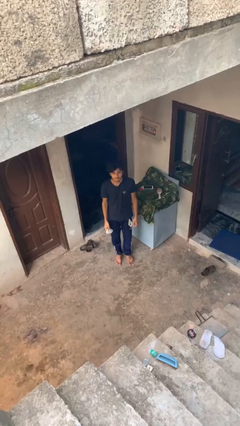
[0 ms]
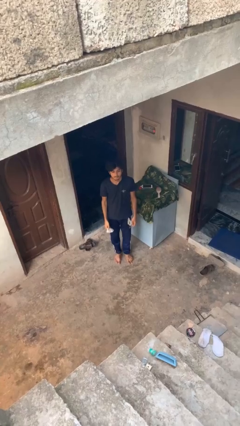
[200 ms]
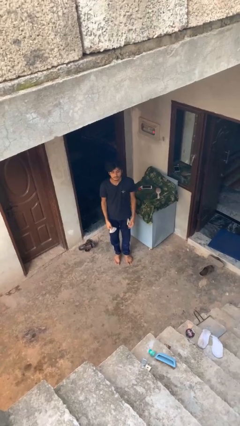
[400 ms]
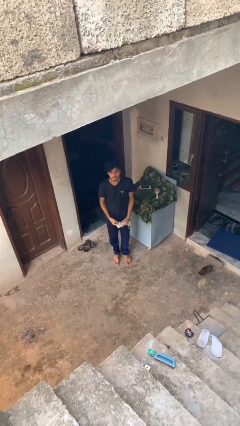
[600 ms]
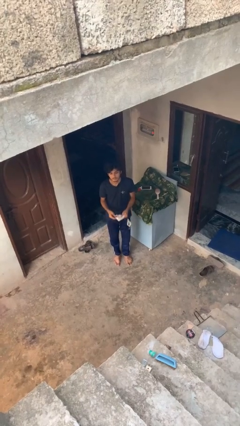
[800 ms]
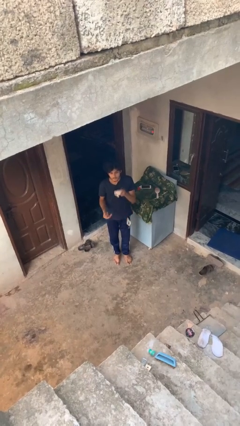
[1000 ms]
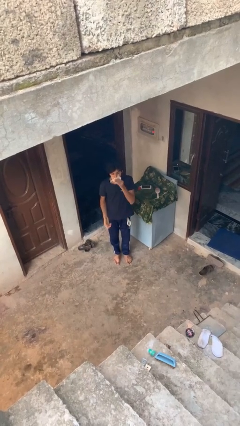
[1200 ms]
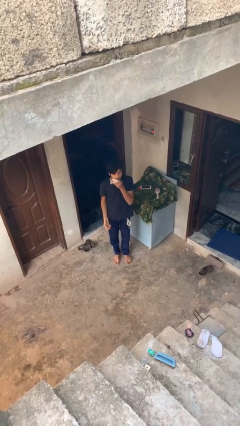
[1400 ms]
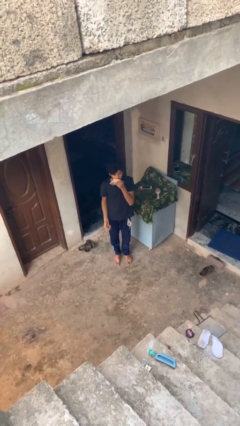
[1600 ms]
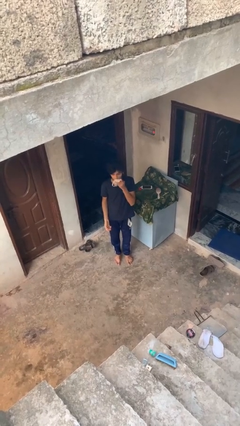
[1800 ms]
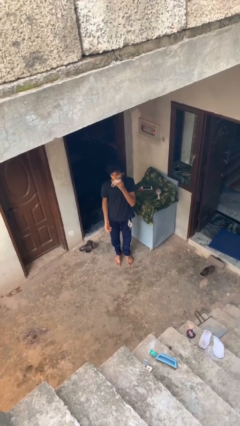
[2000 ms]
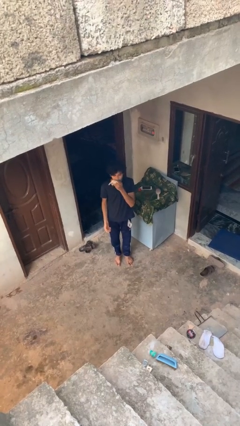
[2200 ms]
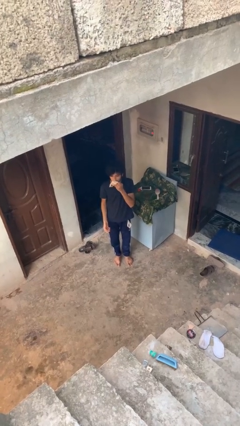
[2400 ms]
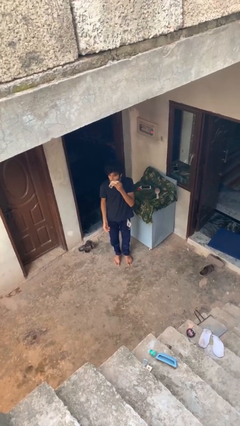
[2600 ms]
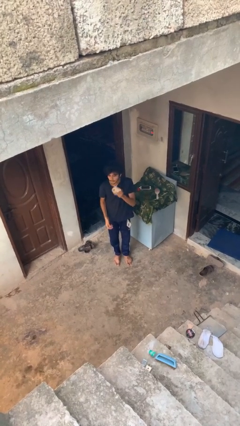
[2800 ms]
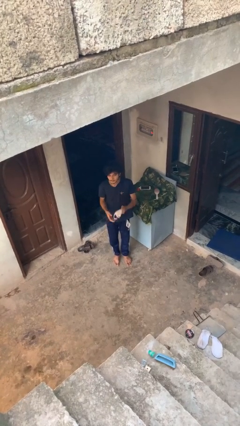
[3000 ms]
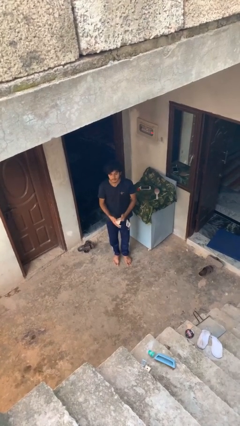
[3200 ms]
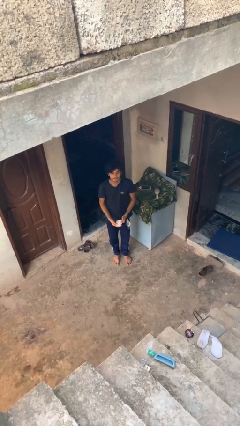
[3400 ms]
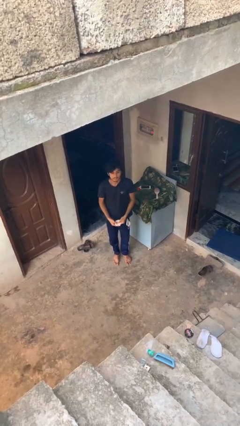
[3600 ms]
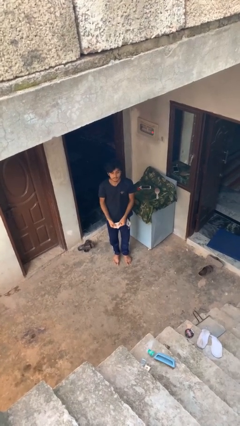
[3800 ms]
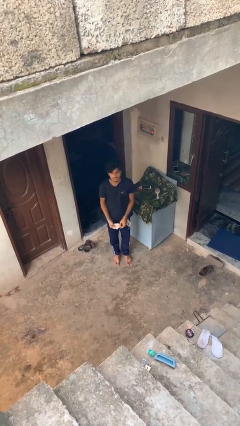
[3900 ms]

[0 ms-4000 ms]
person wipes mouth with napkin

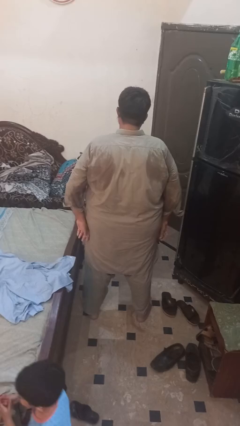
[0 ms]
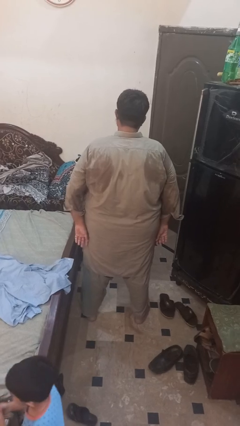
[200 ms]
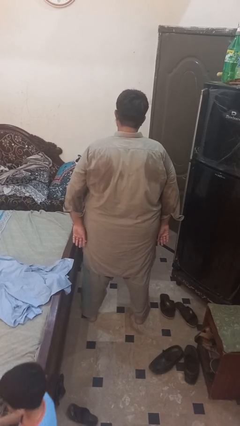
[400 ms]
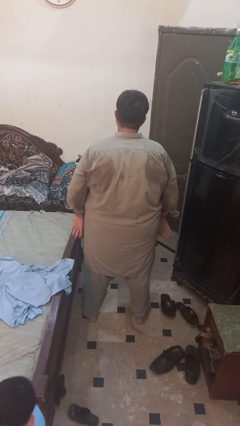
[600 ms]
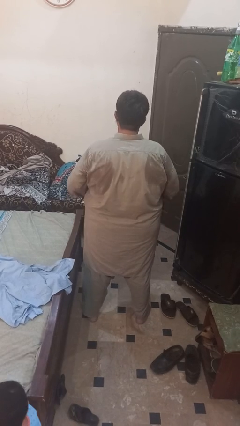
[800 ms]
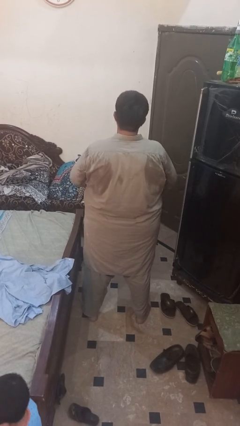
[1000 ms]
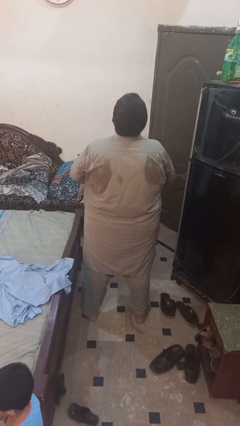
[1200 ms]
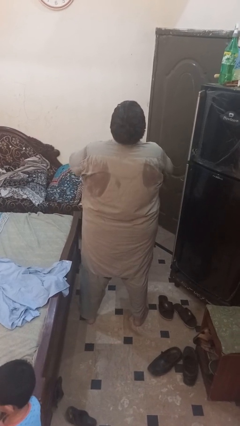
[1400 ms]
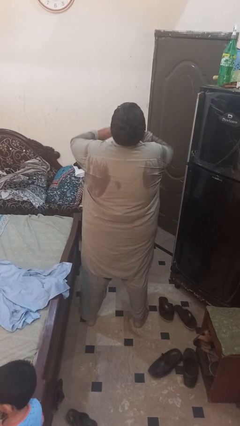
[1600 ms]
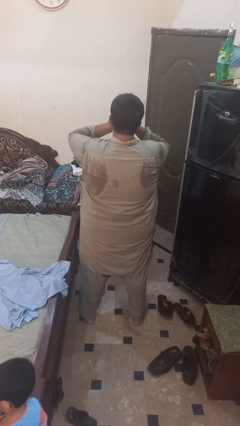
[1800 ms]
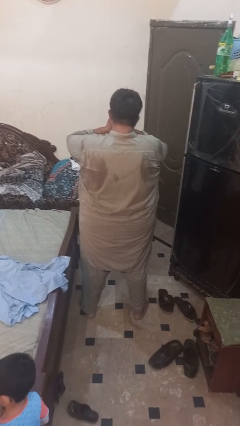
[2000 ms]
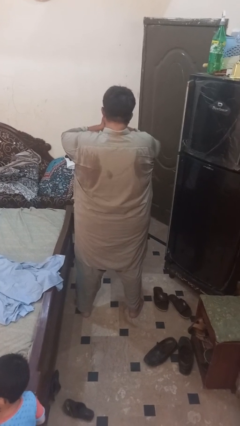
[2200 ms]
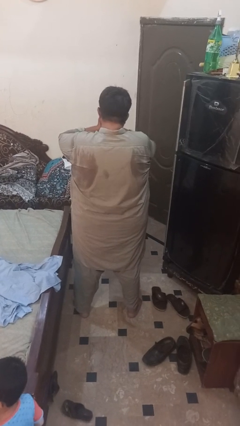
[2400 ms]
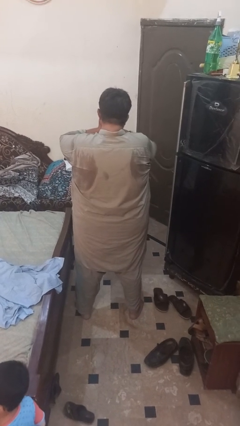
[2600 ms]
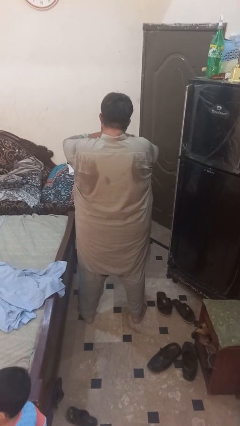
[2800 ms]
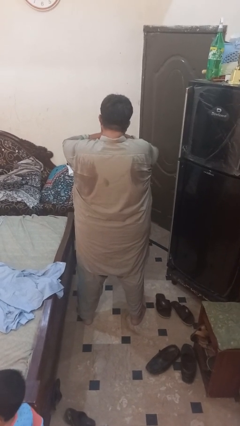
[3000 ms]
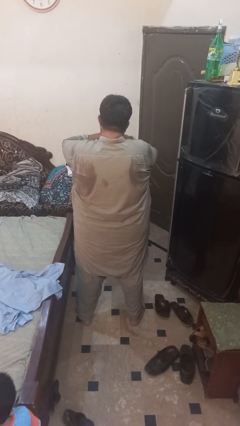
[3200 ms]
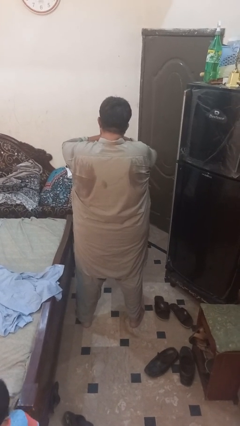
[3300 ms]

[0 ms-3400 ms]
person sneezes into hand

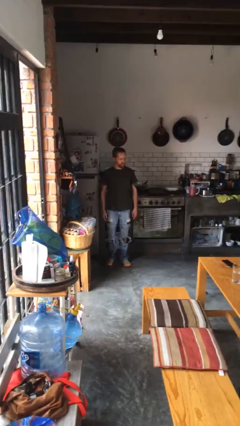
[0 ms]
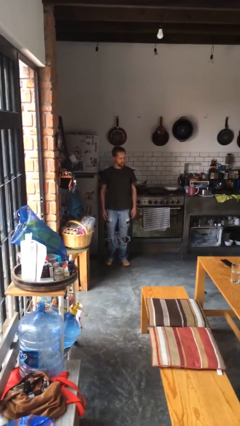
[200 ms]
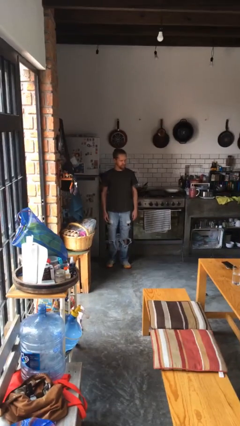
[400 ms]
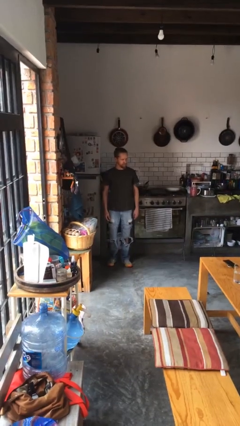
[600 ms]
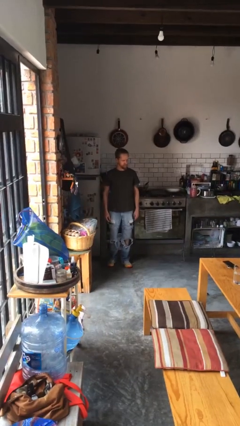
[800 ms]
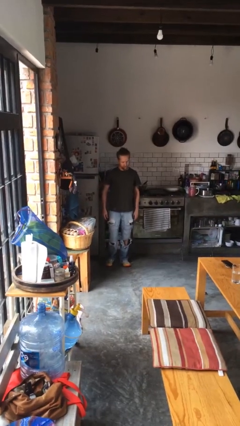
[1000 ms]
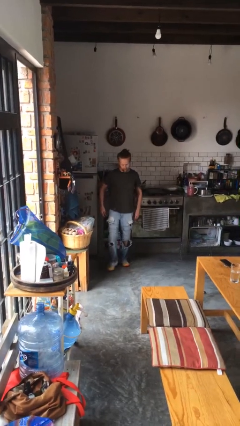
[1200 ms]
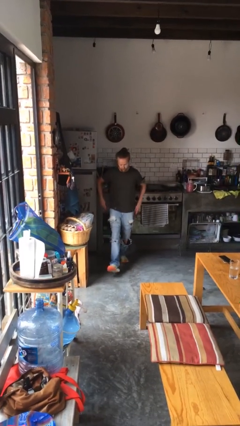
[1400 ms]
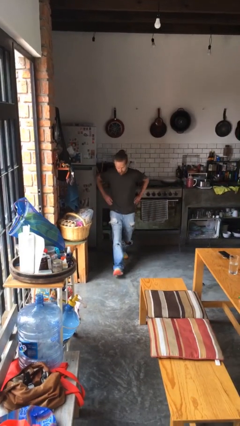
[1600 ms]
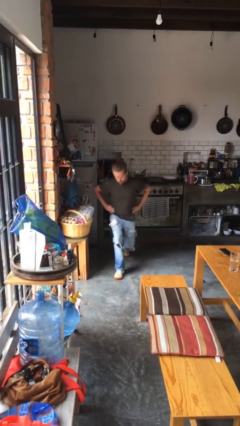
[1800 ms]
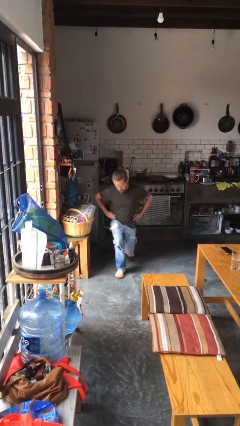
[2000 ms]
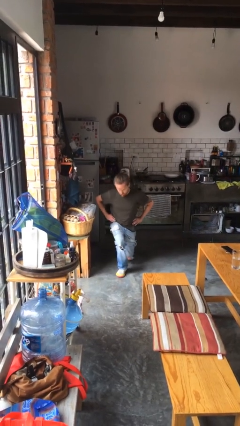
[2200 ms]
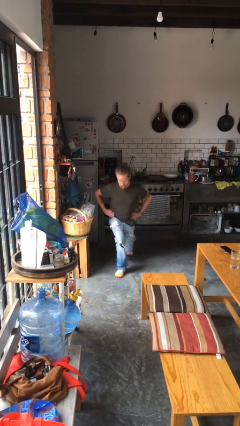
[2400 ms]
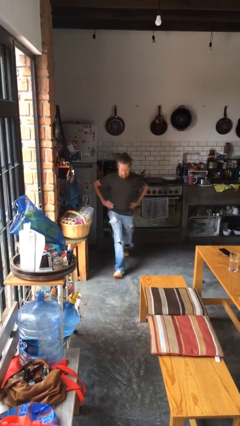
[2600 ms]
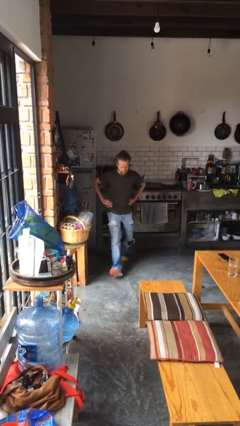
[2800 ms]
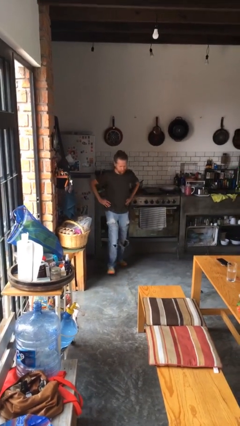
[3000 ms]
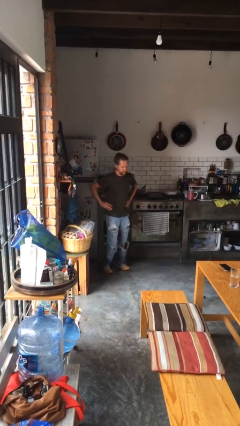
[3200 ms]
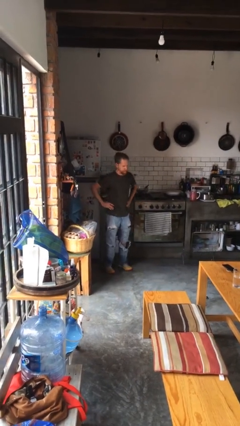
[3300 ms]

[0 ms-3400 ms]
person exercises with lunges

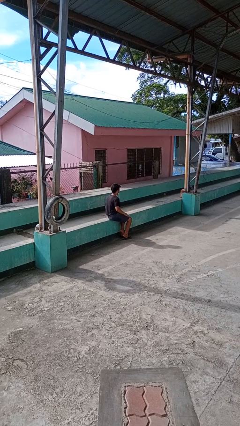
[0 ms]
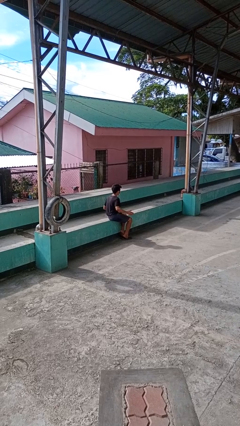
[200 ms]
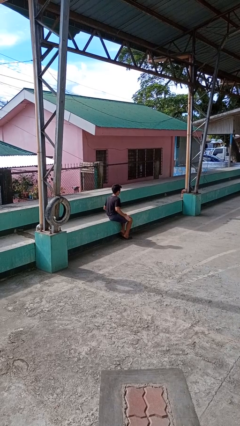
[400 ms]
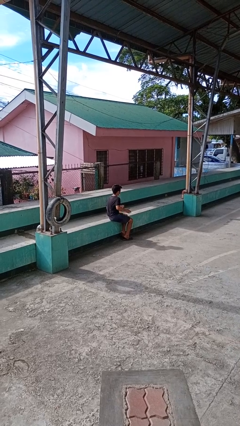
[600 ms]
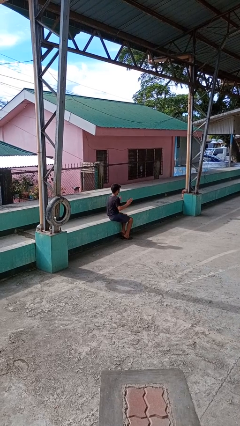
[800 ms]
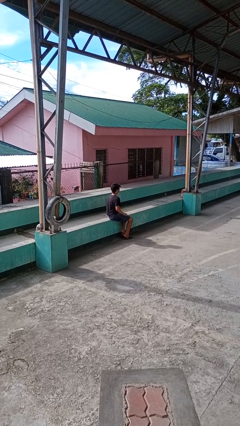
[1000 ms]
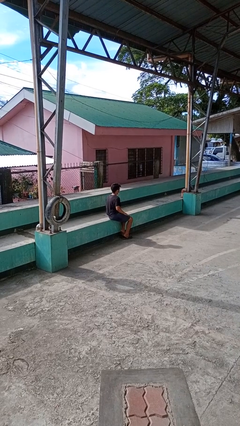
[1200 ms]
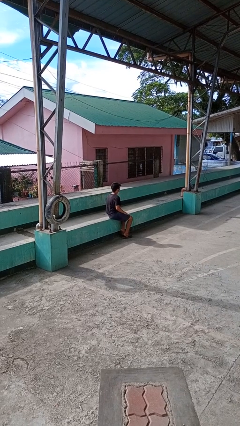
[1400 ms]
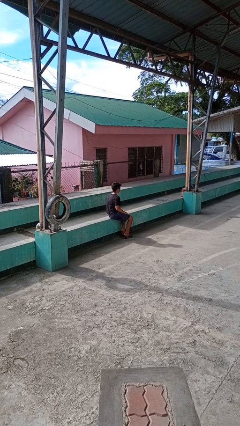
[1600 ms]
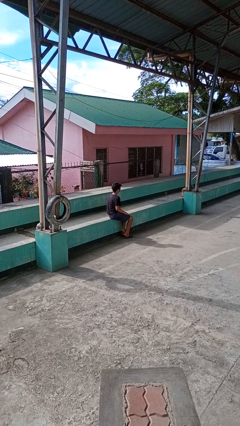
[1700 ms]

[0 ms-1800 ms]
person slaps hands on thighs

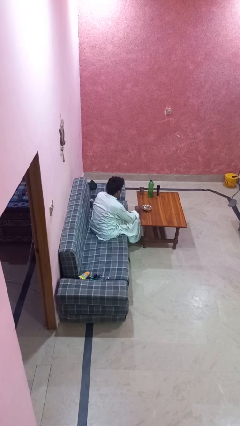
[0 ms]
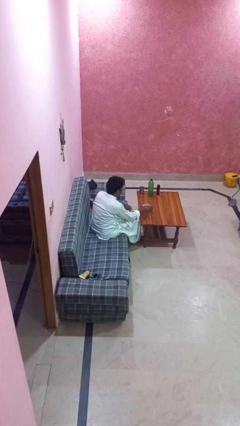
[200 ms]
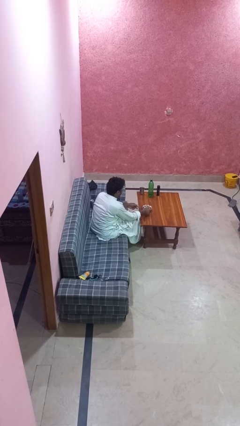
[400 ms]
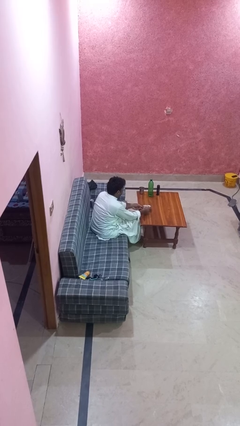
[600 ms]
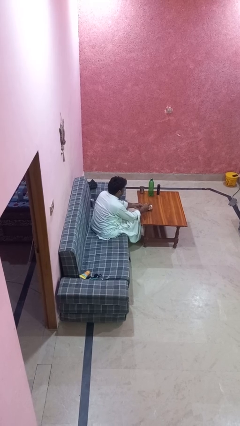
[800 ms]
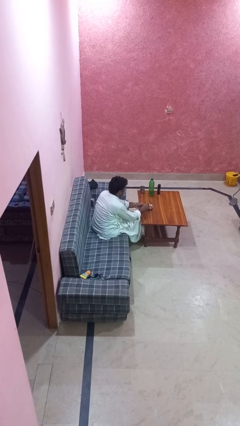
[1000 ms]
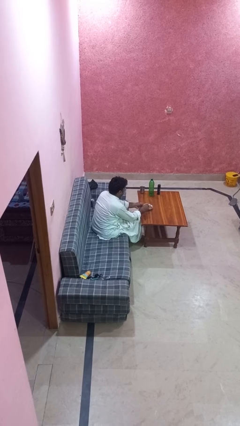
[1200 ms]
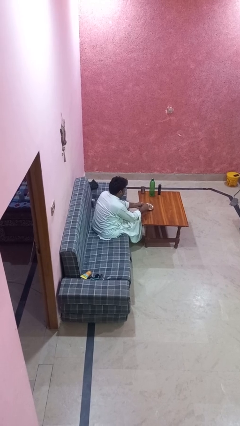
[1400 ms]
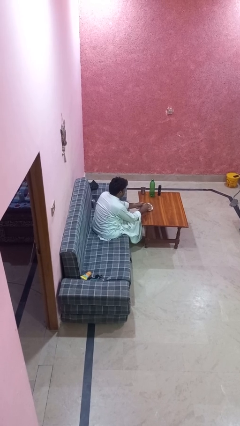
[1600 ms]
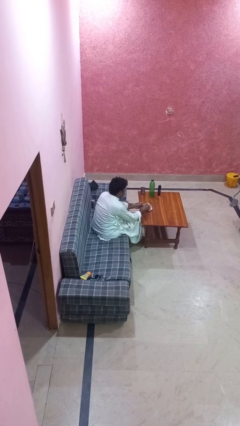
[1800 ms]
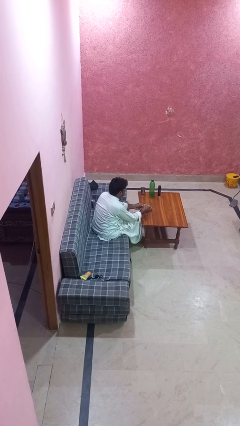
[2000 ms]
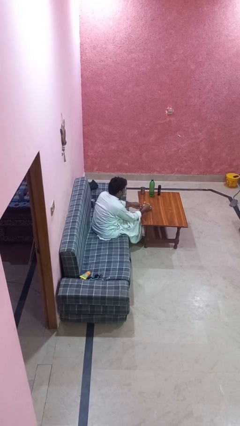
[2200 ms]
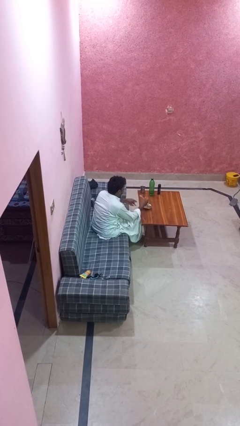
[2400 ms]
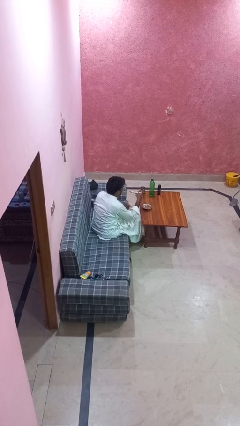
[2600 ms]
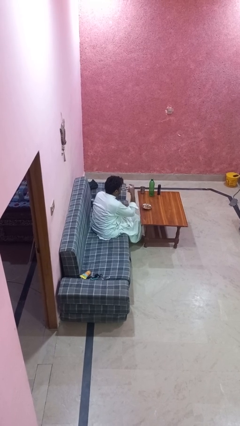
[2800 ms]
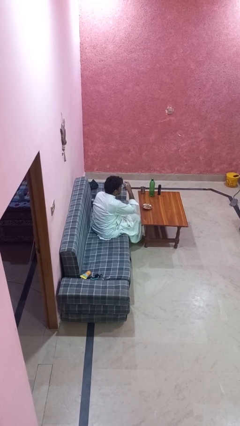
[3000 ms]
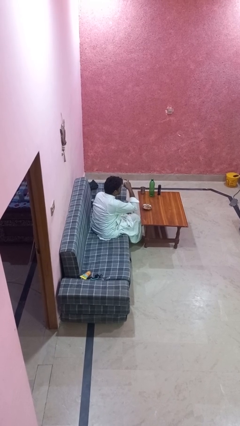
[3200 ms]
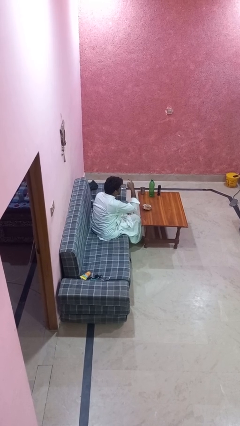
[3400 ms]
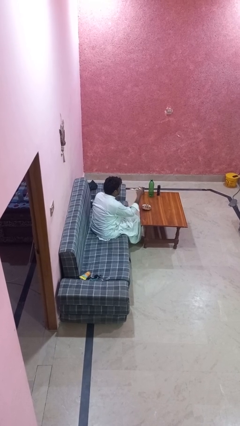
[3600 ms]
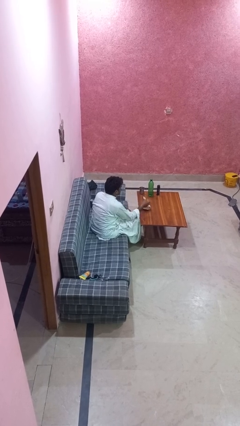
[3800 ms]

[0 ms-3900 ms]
person eats with utensil

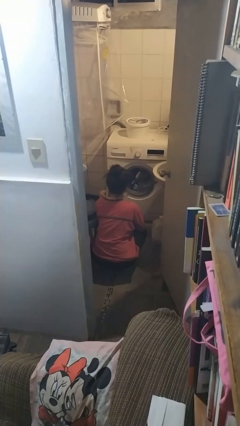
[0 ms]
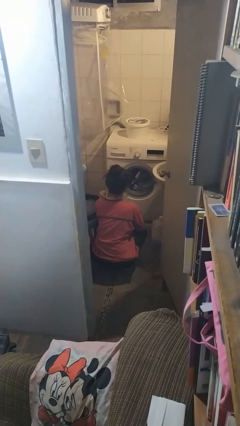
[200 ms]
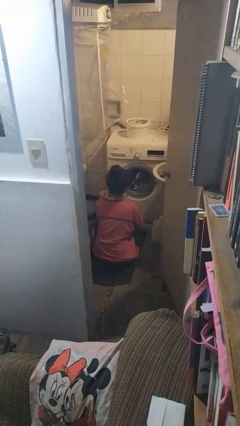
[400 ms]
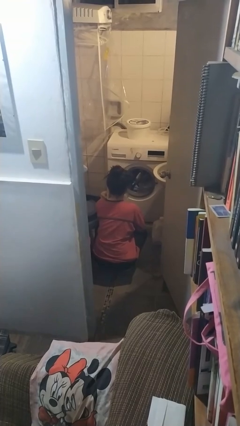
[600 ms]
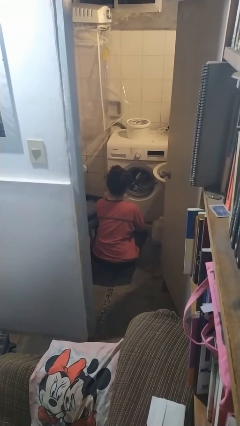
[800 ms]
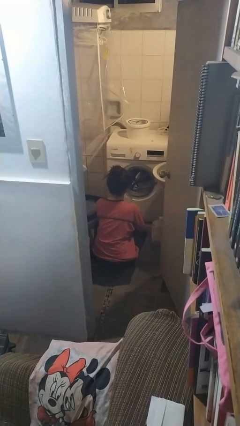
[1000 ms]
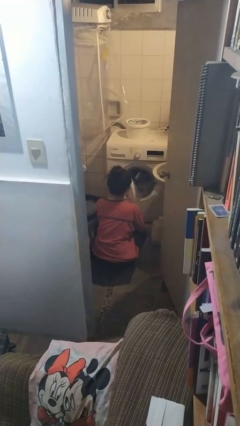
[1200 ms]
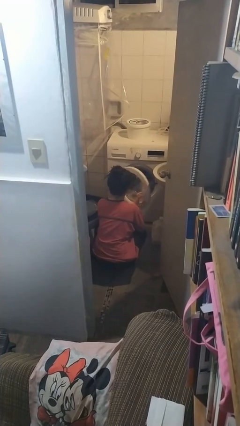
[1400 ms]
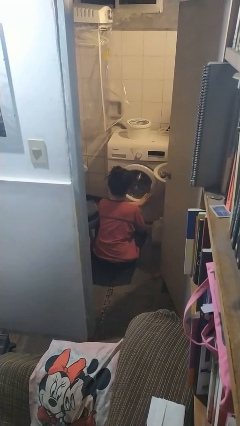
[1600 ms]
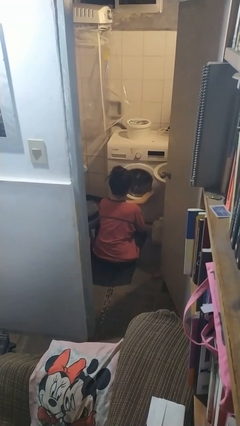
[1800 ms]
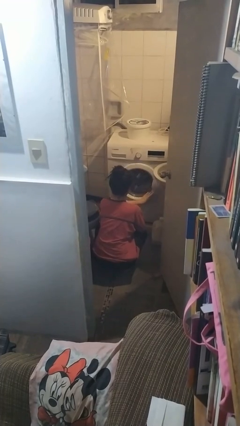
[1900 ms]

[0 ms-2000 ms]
person closes clothes washer
